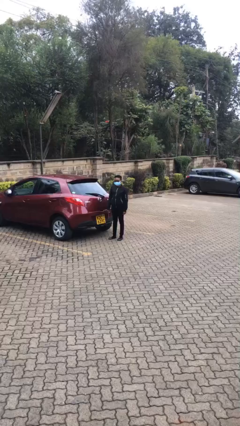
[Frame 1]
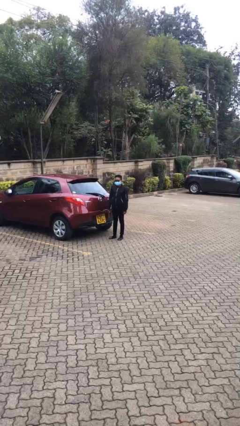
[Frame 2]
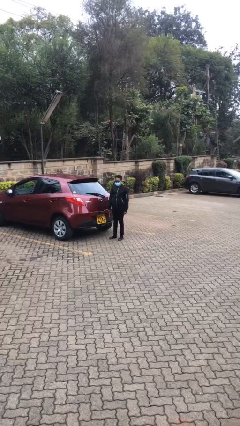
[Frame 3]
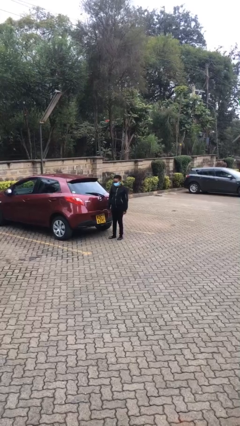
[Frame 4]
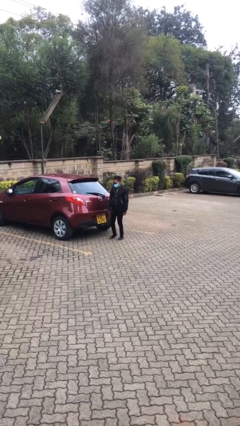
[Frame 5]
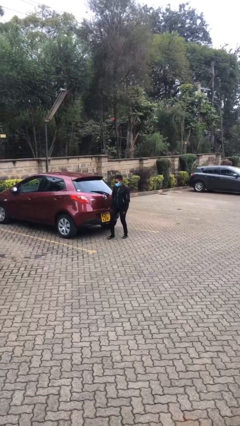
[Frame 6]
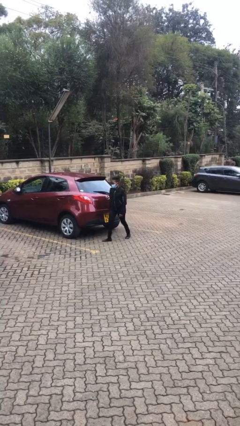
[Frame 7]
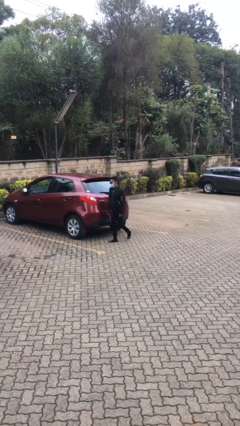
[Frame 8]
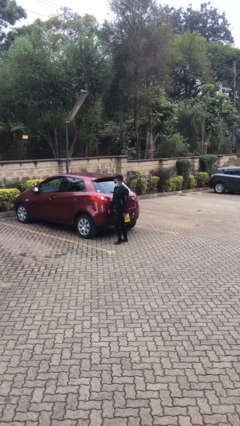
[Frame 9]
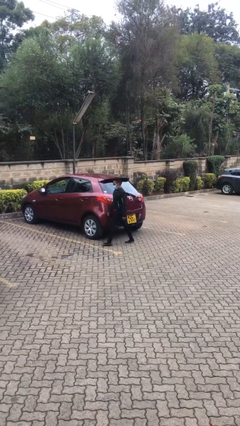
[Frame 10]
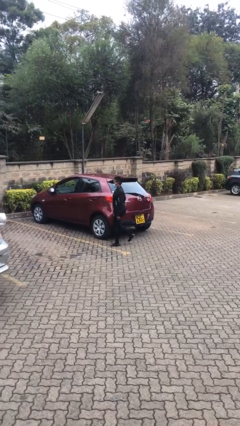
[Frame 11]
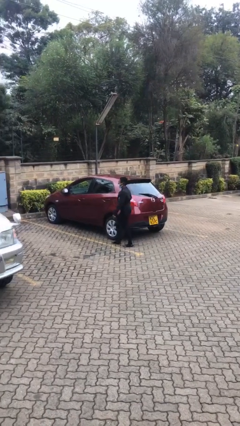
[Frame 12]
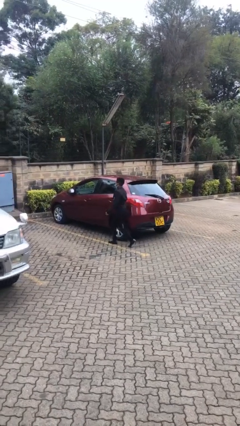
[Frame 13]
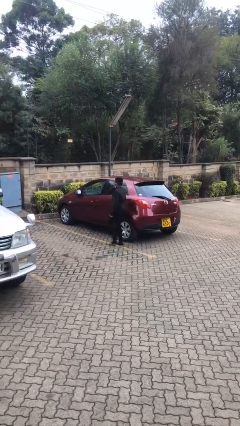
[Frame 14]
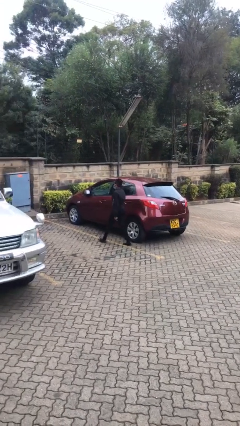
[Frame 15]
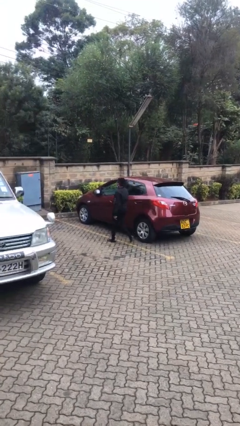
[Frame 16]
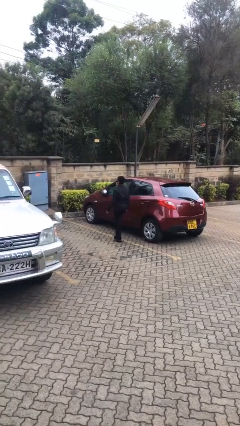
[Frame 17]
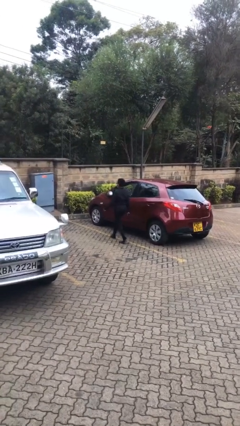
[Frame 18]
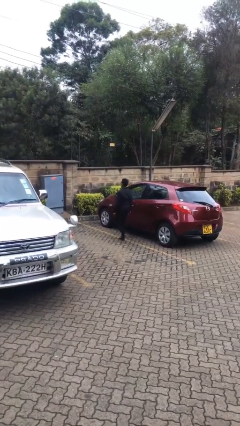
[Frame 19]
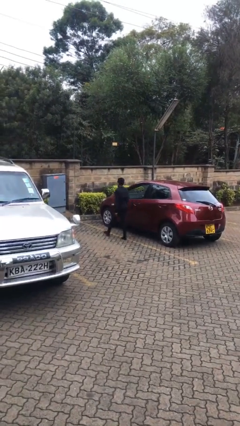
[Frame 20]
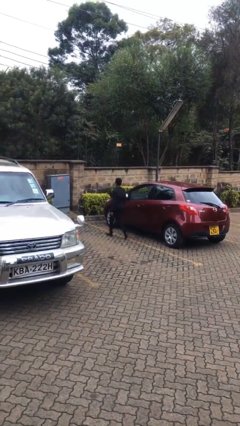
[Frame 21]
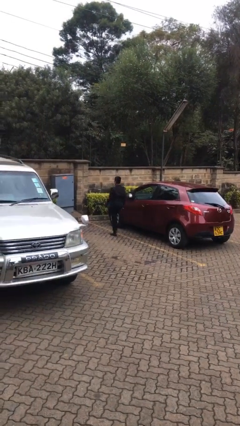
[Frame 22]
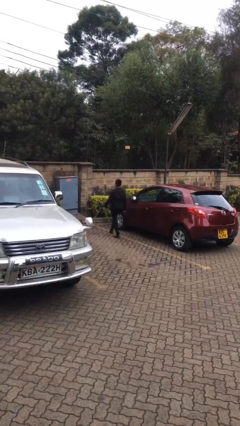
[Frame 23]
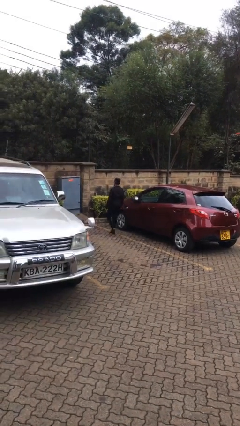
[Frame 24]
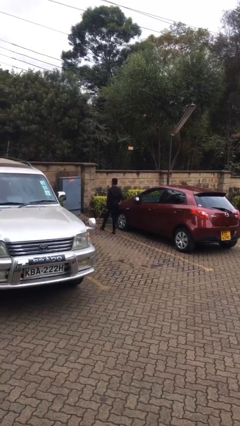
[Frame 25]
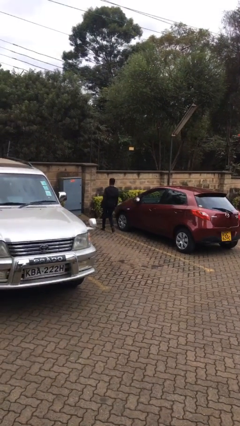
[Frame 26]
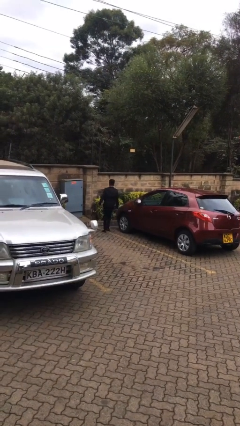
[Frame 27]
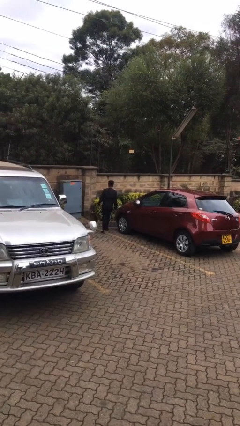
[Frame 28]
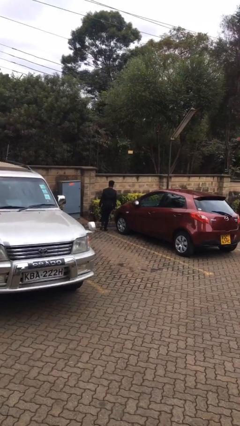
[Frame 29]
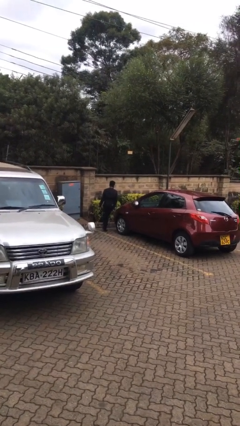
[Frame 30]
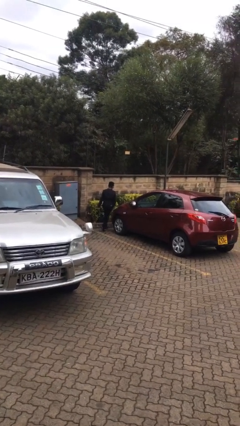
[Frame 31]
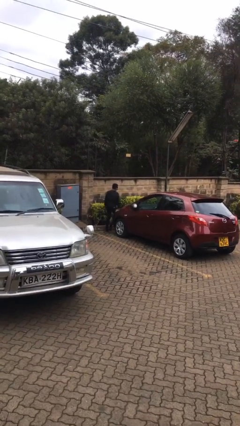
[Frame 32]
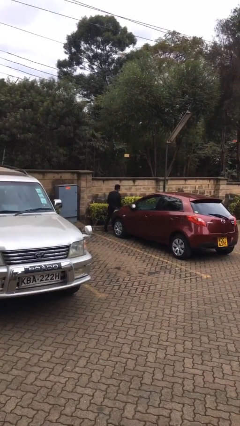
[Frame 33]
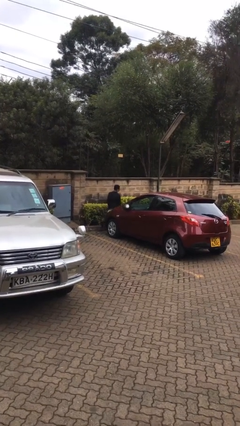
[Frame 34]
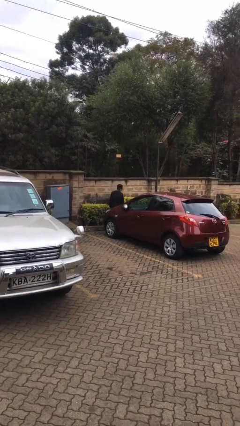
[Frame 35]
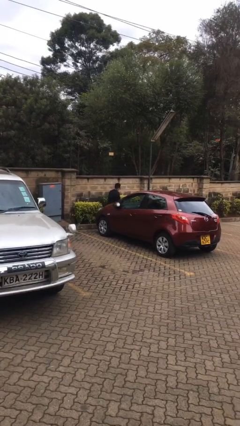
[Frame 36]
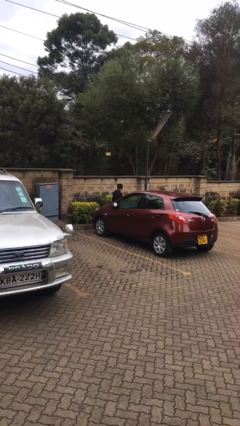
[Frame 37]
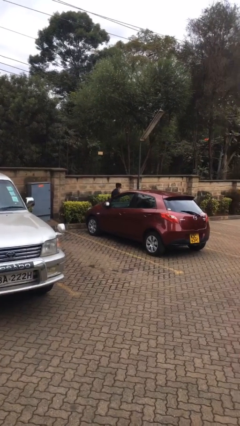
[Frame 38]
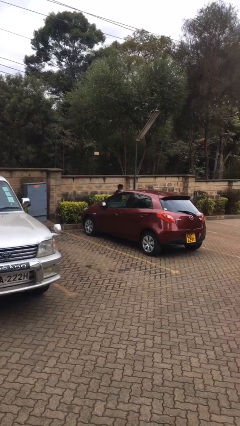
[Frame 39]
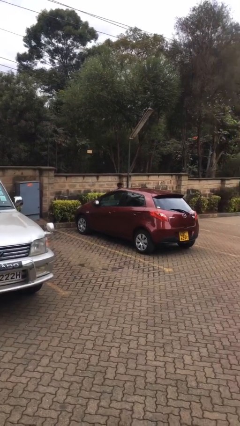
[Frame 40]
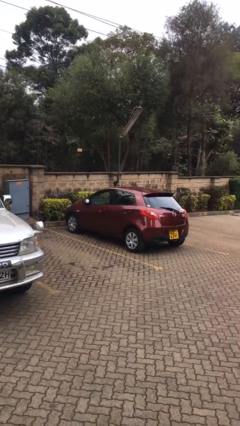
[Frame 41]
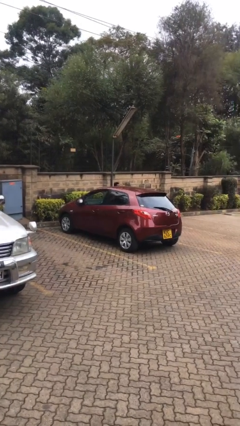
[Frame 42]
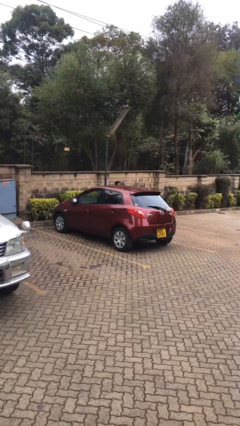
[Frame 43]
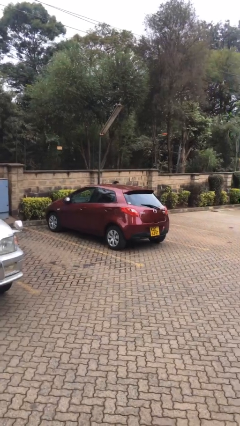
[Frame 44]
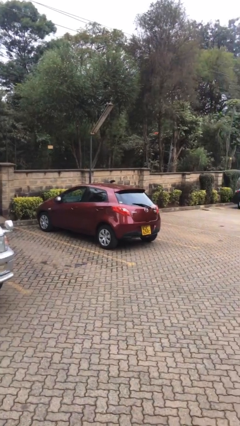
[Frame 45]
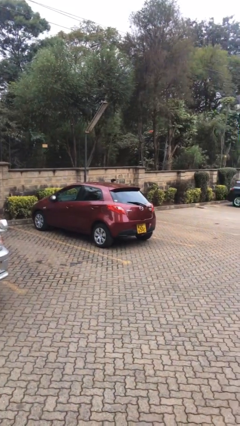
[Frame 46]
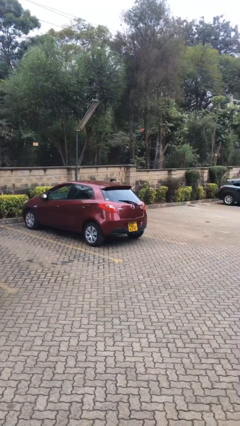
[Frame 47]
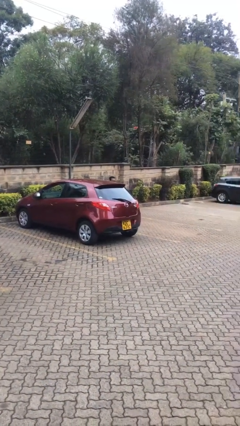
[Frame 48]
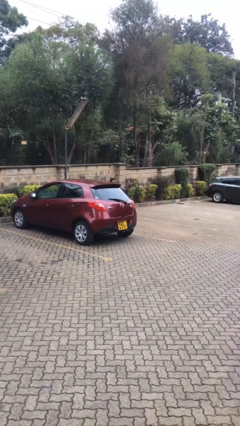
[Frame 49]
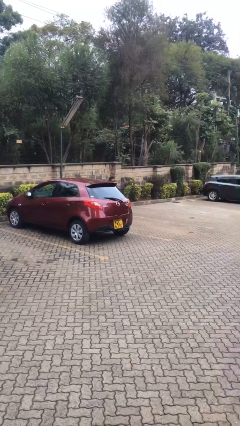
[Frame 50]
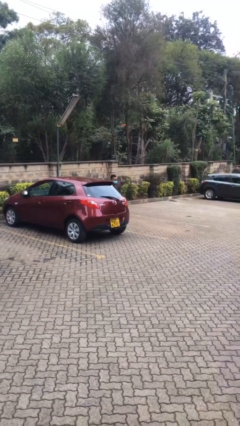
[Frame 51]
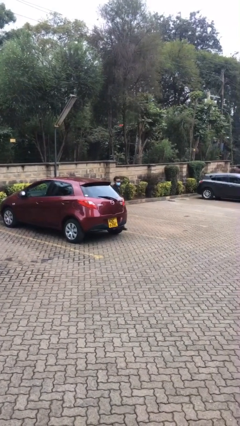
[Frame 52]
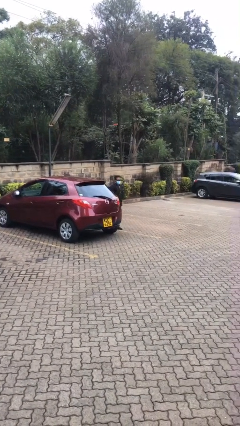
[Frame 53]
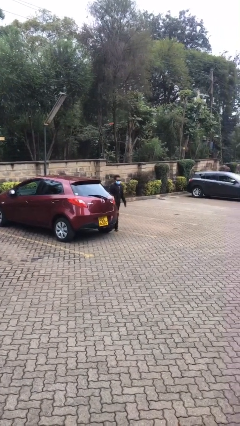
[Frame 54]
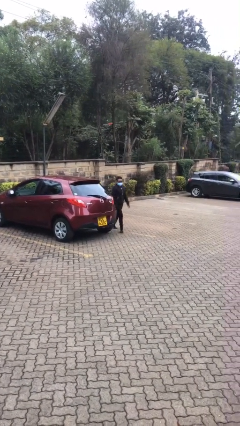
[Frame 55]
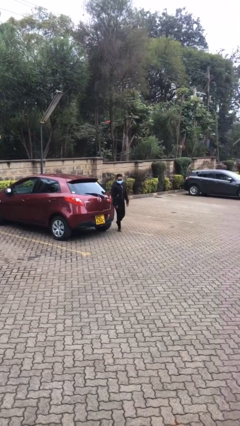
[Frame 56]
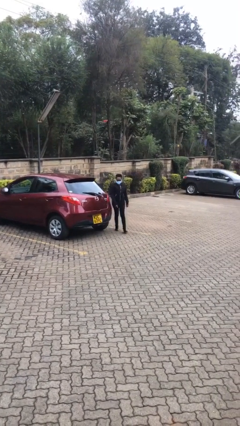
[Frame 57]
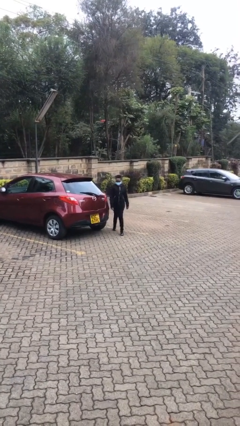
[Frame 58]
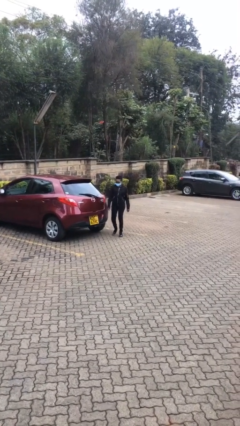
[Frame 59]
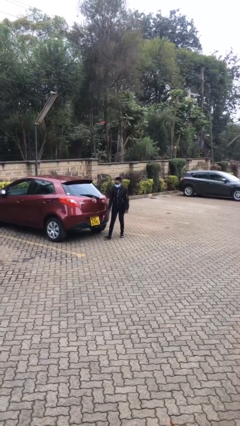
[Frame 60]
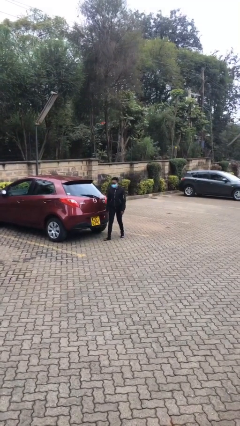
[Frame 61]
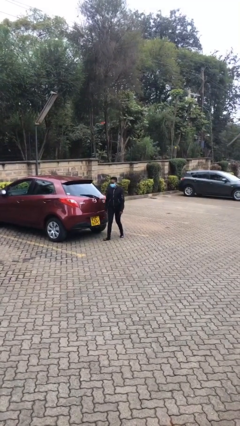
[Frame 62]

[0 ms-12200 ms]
person walks around car

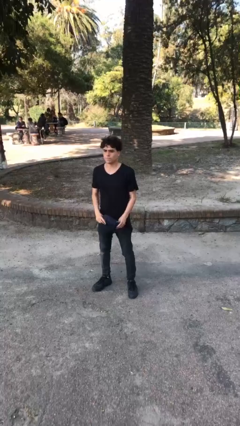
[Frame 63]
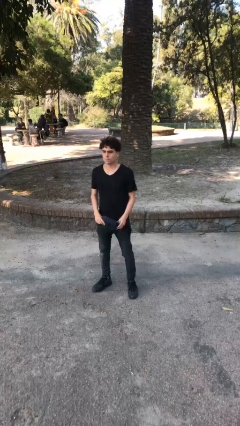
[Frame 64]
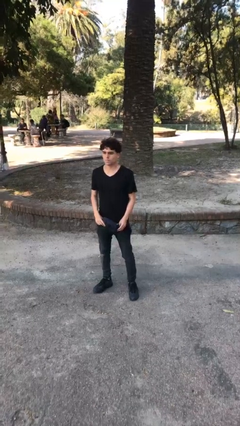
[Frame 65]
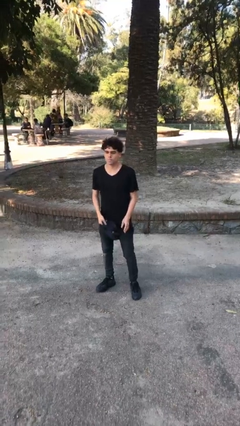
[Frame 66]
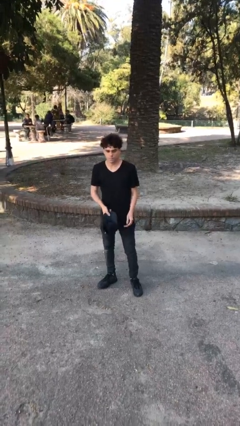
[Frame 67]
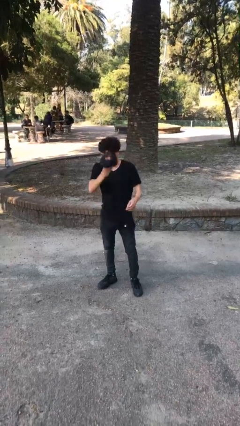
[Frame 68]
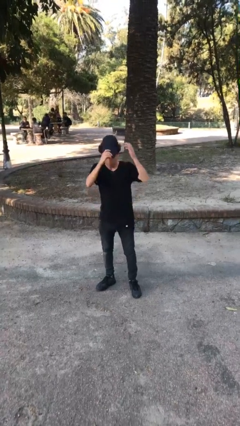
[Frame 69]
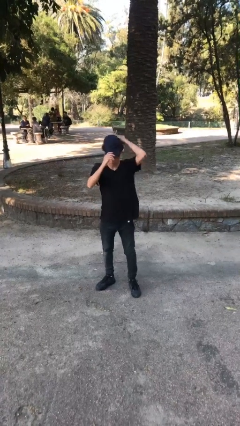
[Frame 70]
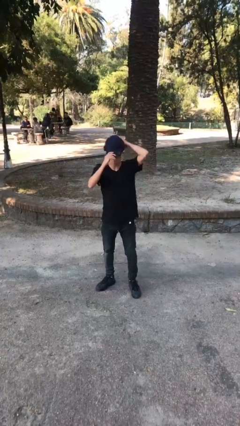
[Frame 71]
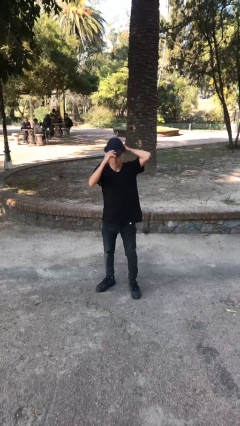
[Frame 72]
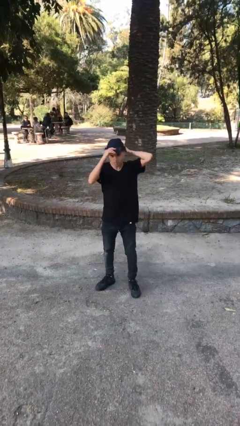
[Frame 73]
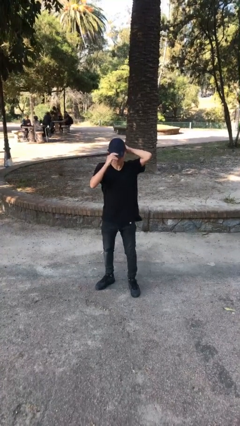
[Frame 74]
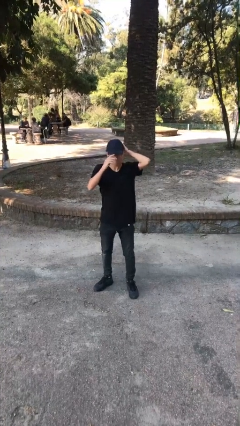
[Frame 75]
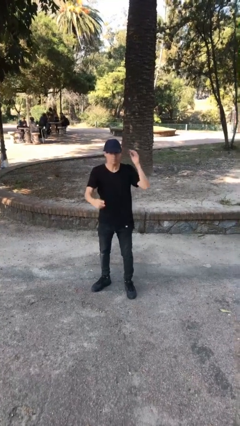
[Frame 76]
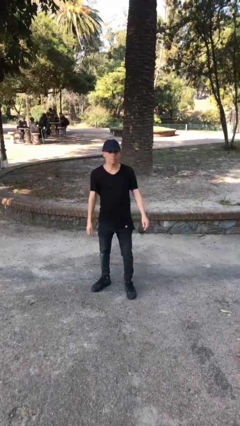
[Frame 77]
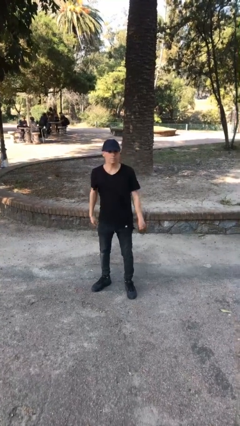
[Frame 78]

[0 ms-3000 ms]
person puts on hat

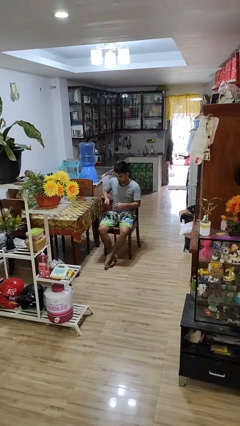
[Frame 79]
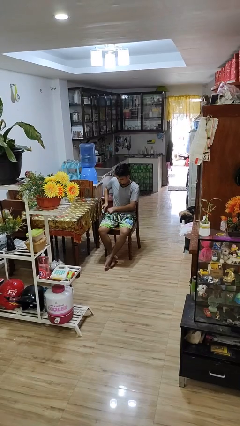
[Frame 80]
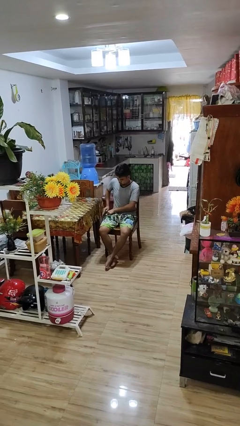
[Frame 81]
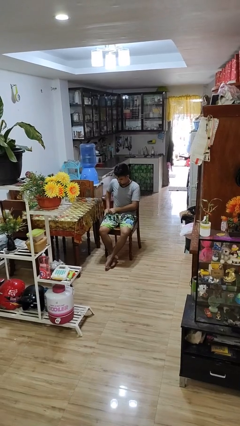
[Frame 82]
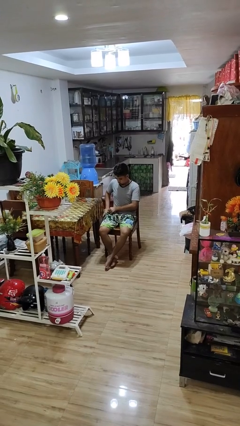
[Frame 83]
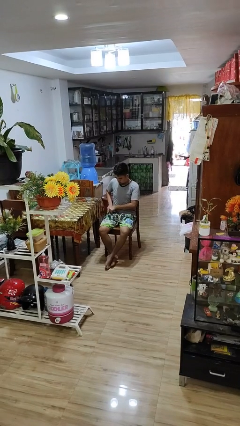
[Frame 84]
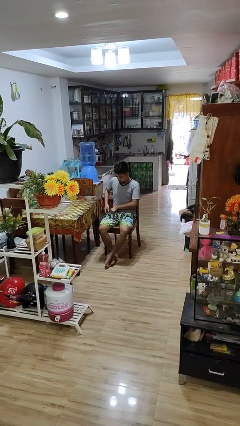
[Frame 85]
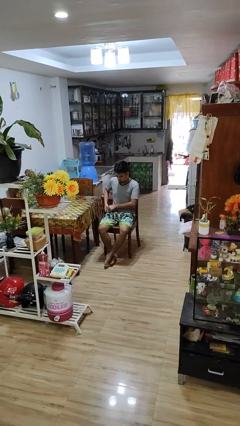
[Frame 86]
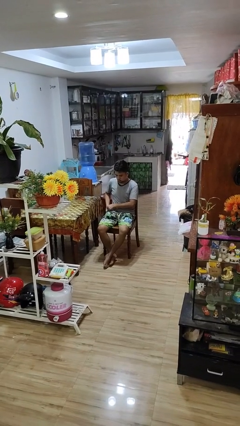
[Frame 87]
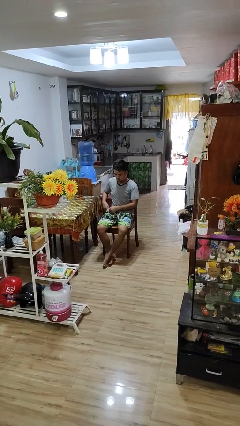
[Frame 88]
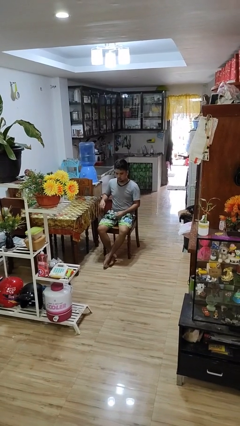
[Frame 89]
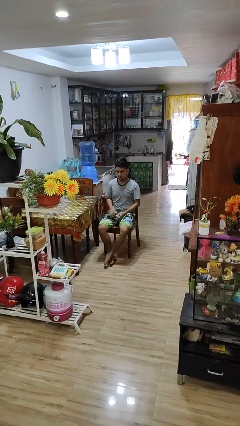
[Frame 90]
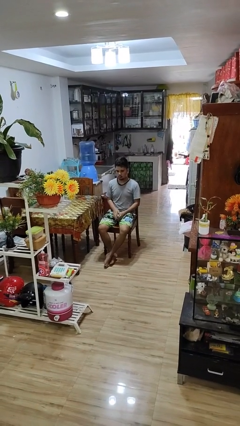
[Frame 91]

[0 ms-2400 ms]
person puts phone into pocket

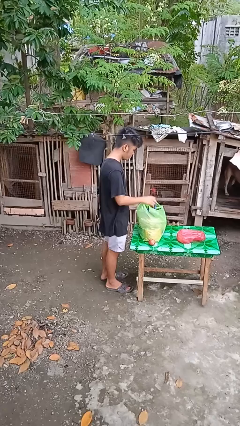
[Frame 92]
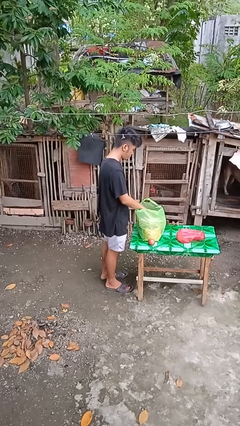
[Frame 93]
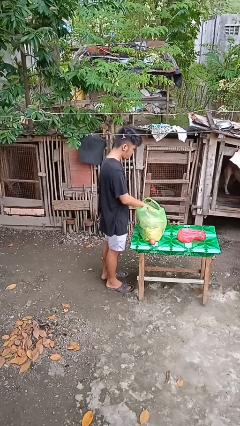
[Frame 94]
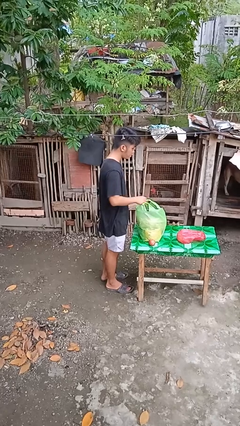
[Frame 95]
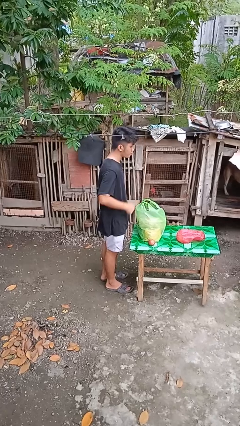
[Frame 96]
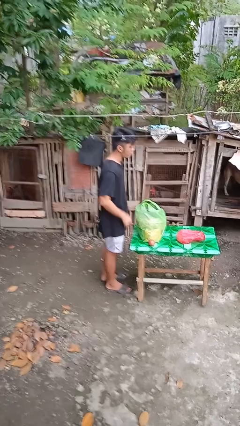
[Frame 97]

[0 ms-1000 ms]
person puts object into bag
